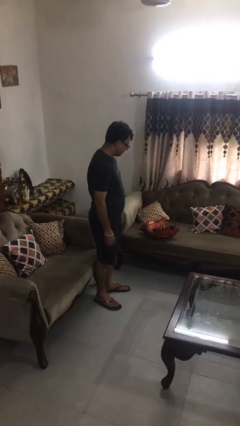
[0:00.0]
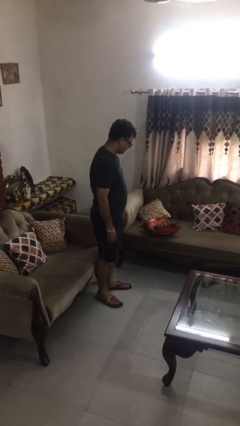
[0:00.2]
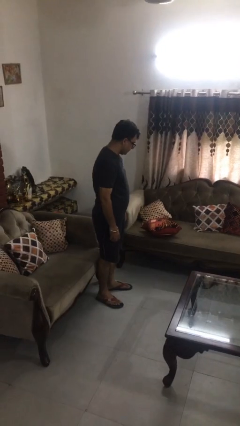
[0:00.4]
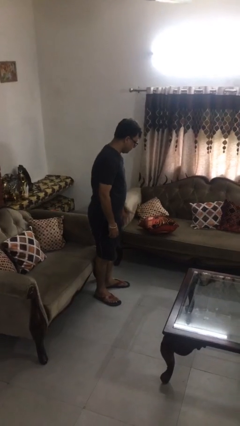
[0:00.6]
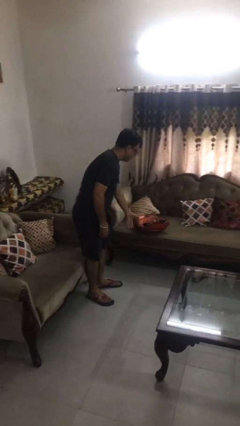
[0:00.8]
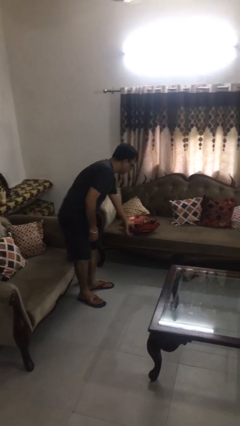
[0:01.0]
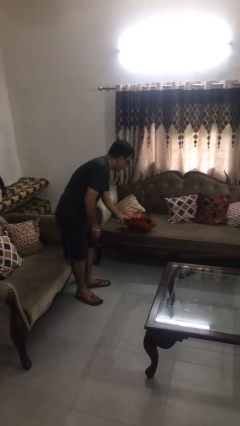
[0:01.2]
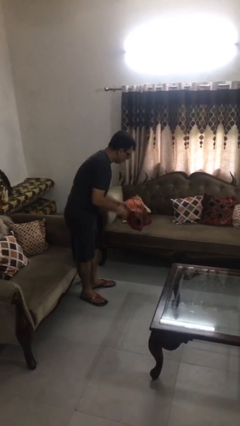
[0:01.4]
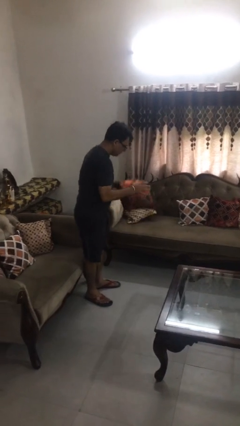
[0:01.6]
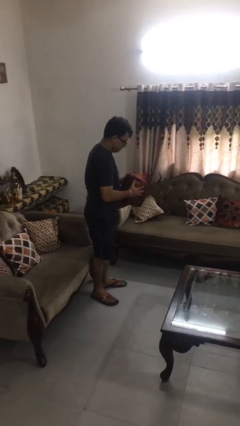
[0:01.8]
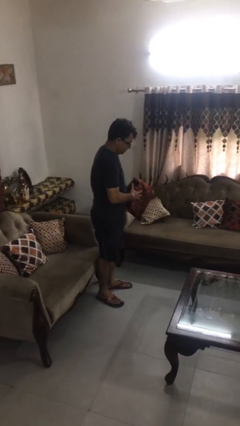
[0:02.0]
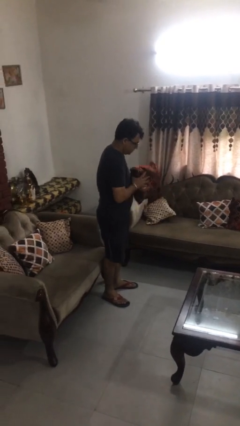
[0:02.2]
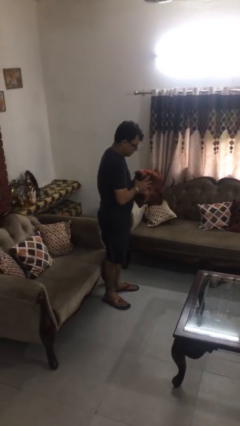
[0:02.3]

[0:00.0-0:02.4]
person picks up object from couch

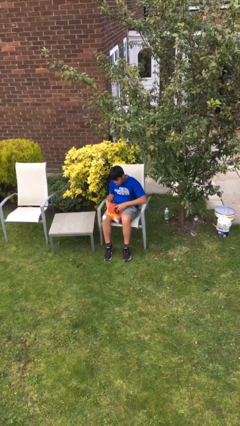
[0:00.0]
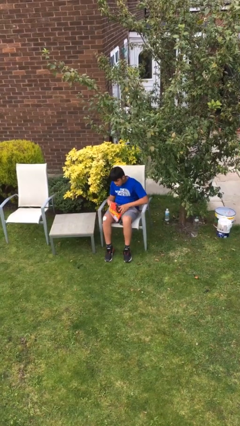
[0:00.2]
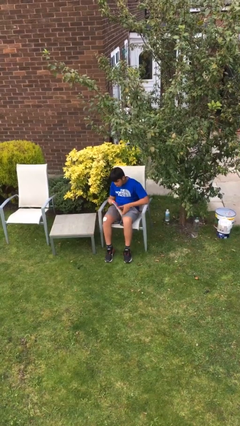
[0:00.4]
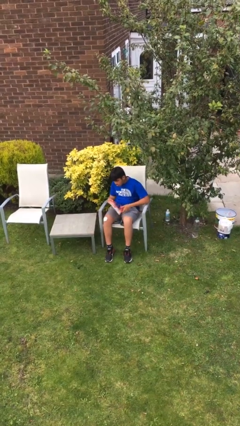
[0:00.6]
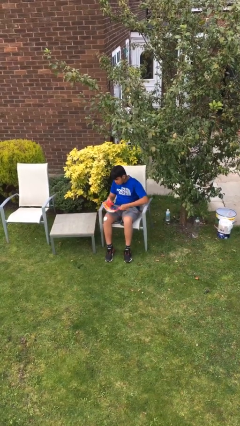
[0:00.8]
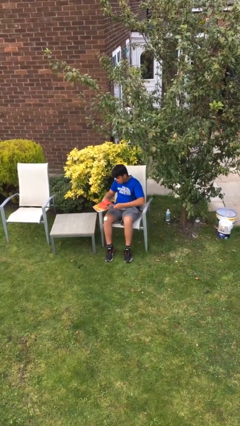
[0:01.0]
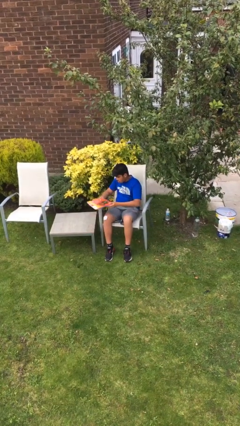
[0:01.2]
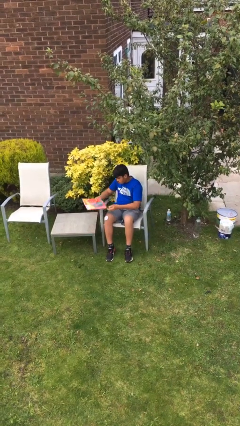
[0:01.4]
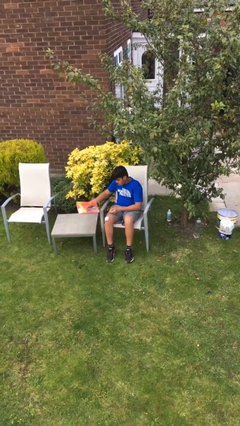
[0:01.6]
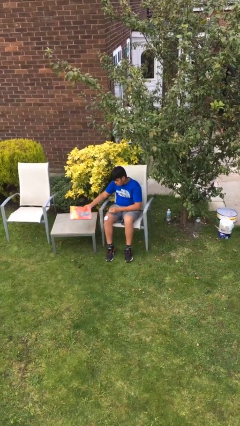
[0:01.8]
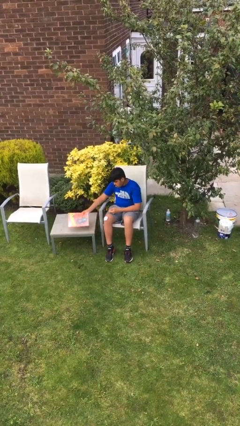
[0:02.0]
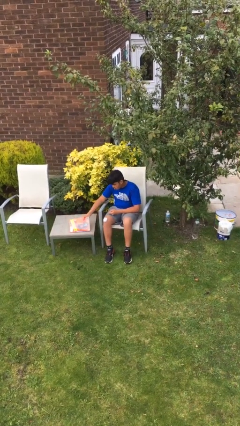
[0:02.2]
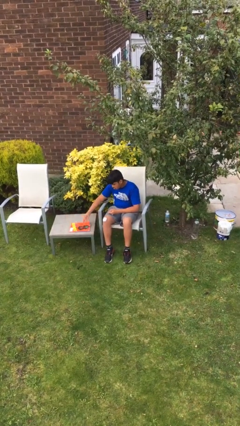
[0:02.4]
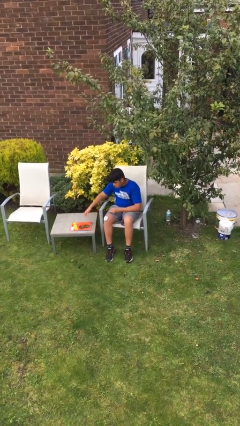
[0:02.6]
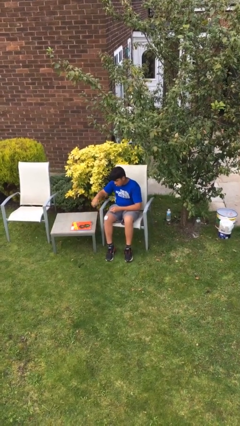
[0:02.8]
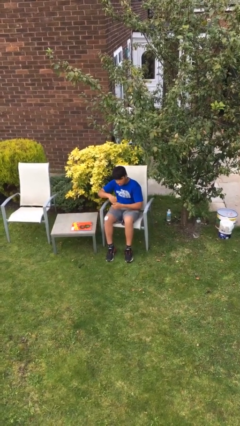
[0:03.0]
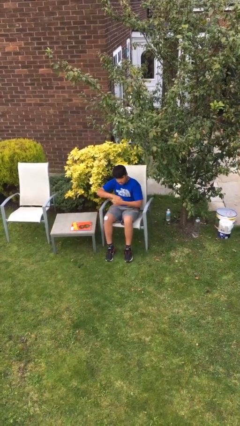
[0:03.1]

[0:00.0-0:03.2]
person puts down object on table

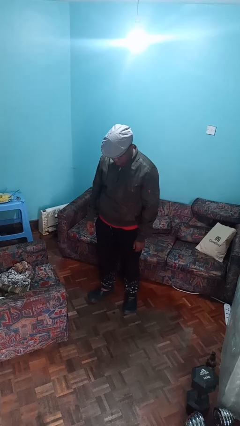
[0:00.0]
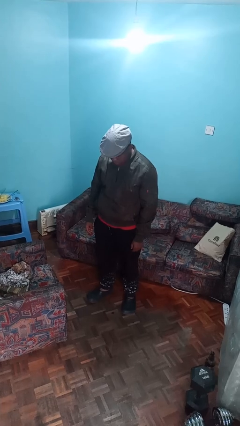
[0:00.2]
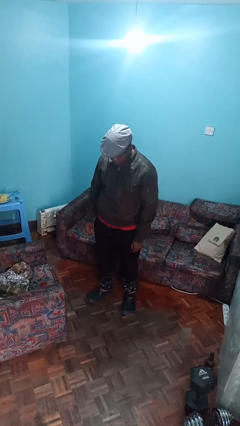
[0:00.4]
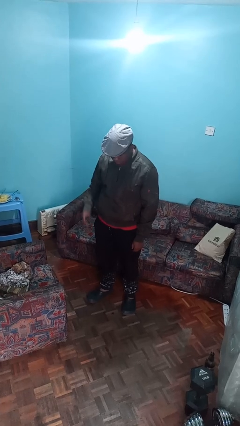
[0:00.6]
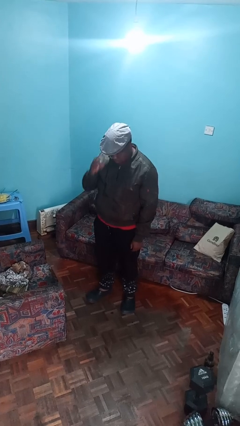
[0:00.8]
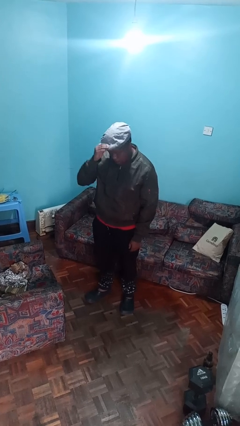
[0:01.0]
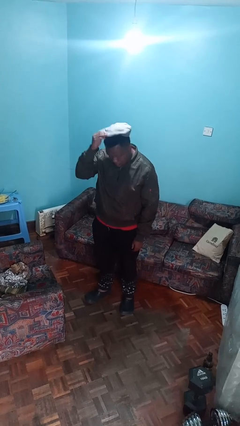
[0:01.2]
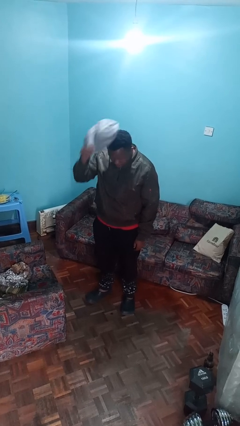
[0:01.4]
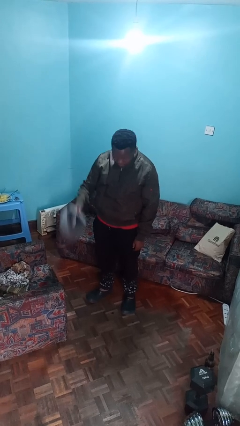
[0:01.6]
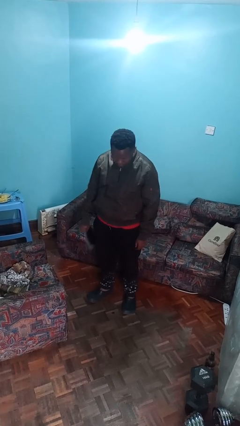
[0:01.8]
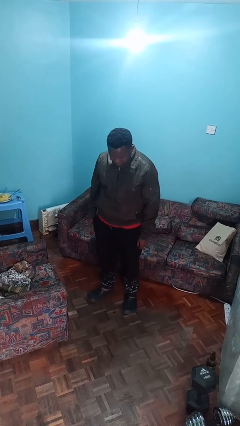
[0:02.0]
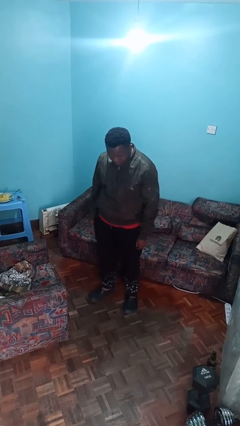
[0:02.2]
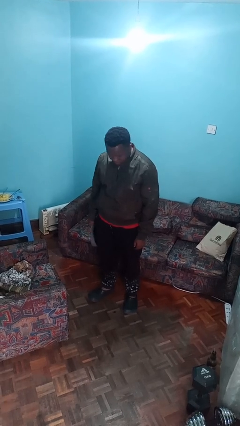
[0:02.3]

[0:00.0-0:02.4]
person takes off hat

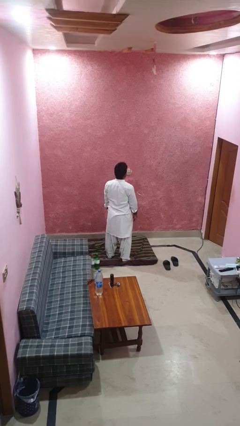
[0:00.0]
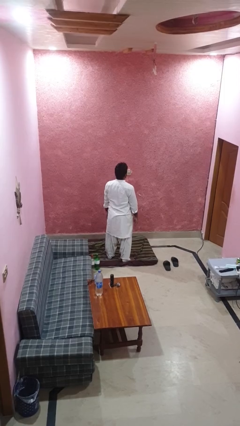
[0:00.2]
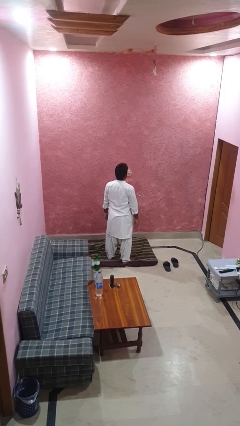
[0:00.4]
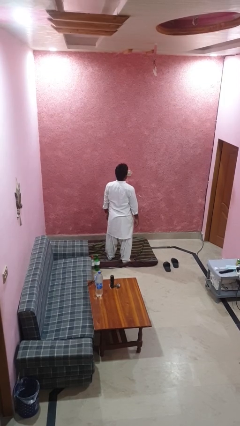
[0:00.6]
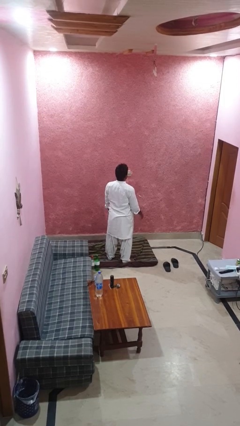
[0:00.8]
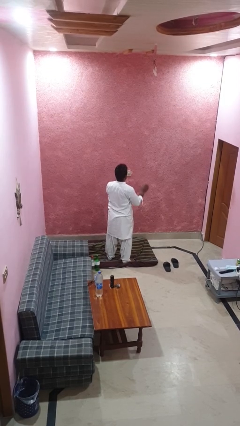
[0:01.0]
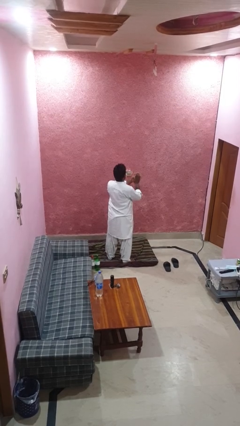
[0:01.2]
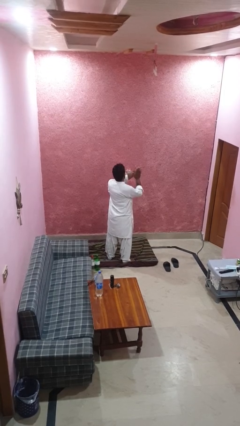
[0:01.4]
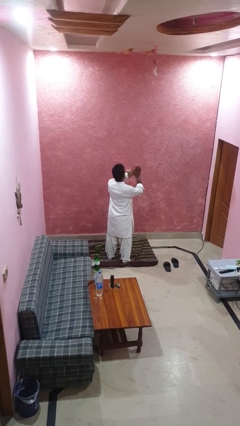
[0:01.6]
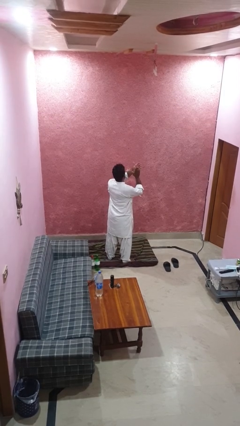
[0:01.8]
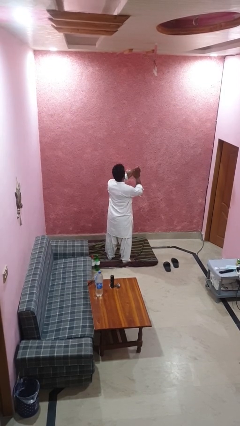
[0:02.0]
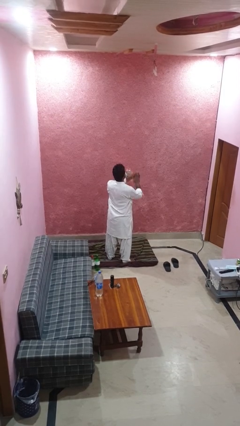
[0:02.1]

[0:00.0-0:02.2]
person claps hands

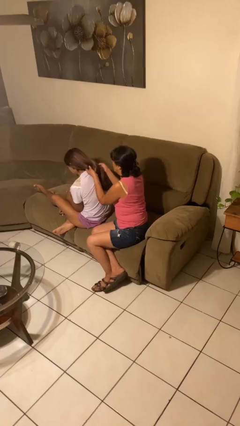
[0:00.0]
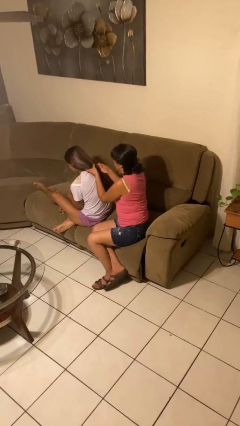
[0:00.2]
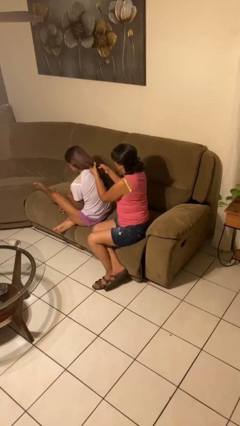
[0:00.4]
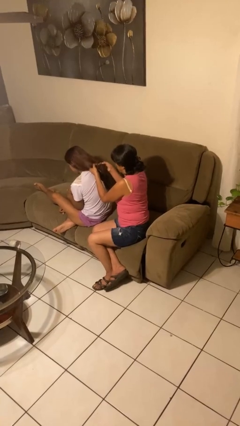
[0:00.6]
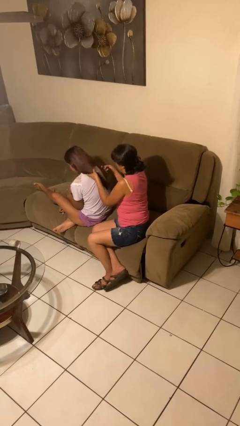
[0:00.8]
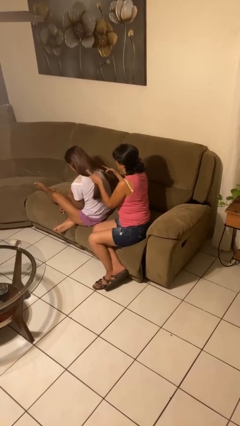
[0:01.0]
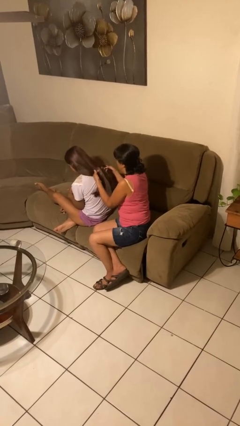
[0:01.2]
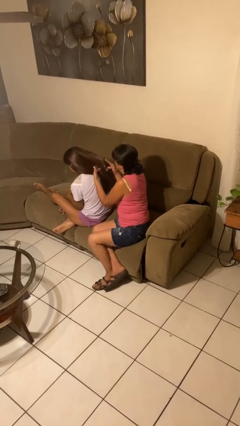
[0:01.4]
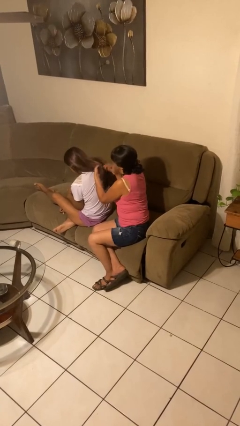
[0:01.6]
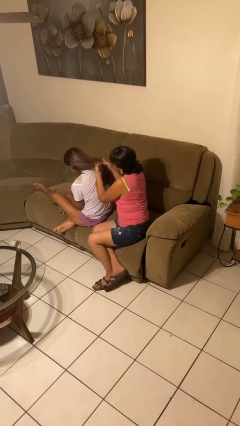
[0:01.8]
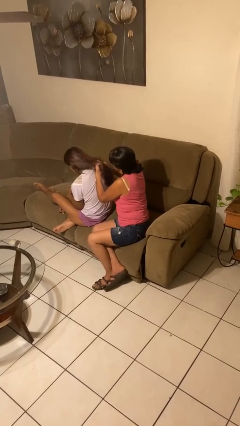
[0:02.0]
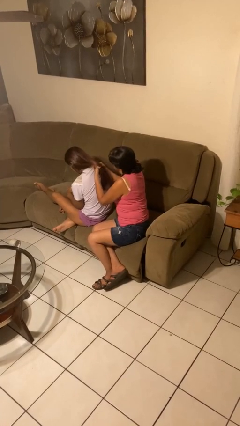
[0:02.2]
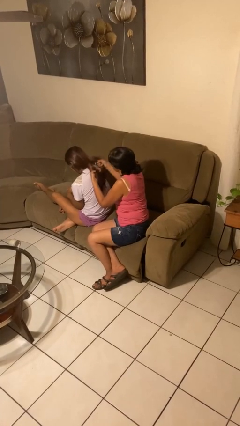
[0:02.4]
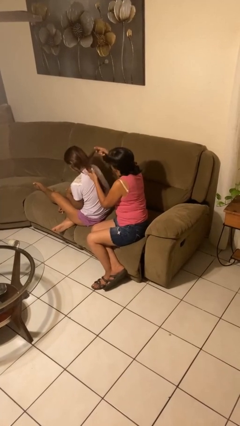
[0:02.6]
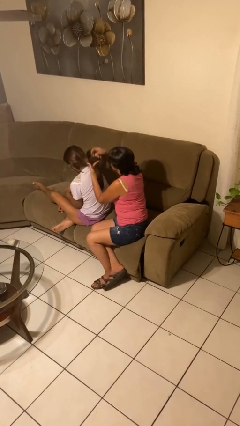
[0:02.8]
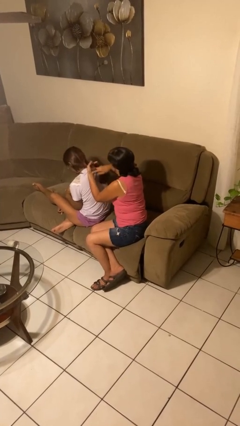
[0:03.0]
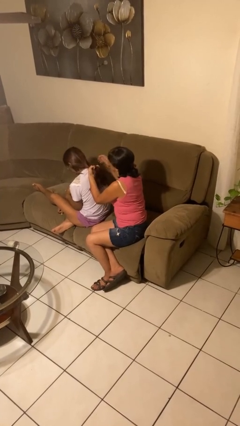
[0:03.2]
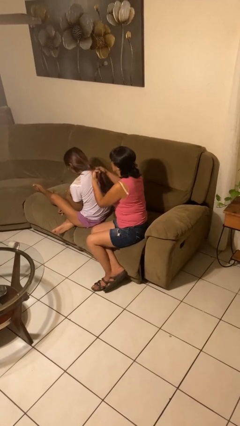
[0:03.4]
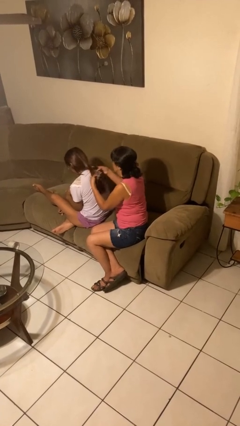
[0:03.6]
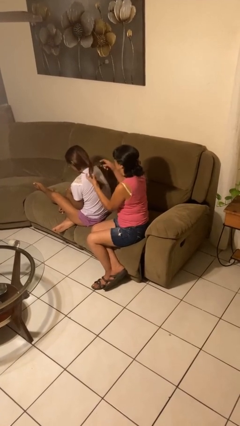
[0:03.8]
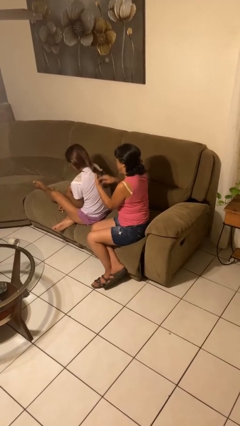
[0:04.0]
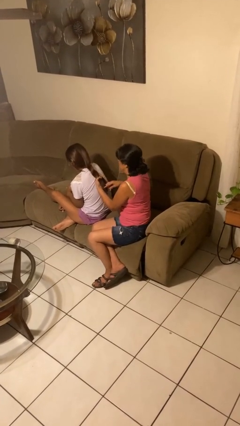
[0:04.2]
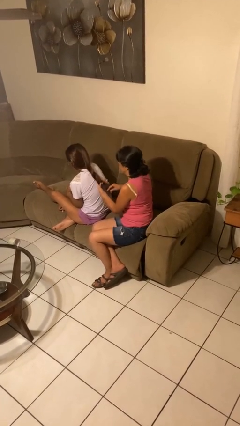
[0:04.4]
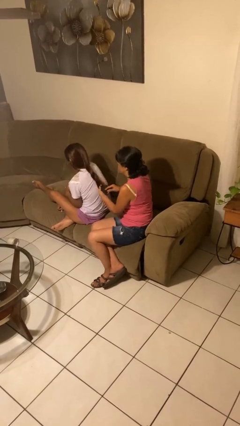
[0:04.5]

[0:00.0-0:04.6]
person braids hair of person

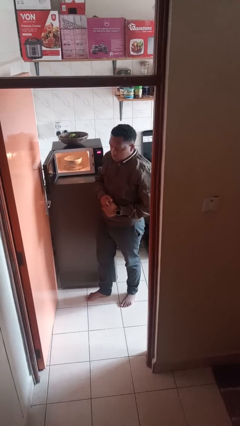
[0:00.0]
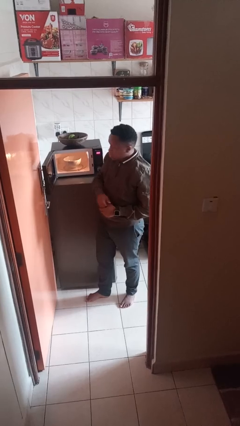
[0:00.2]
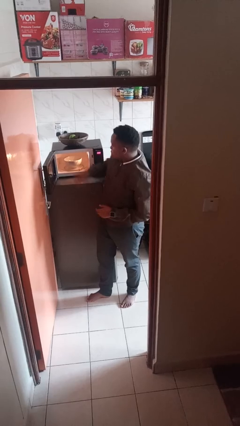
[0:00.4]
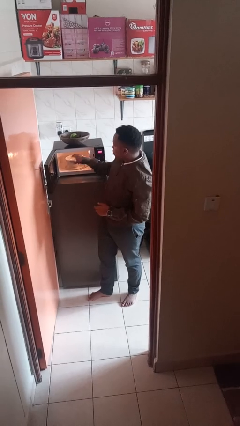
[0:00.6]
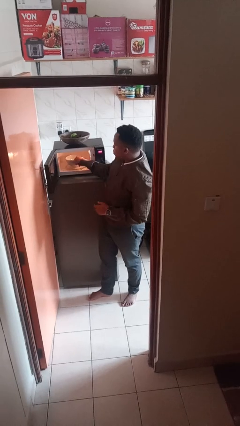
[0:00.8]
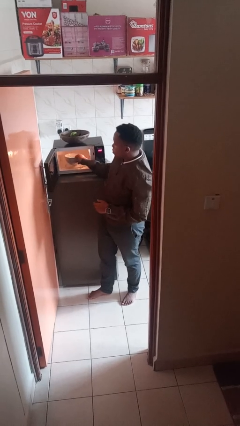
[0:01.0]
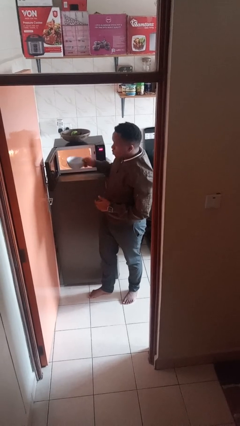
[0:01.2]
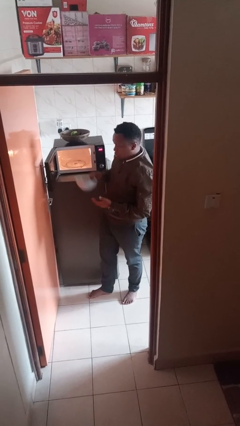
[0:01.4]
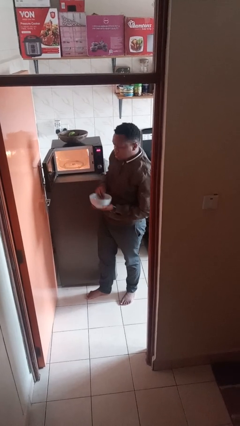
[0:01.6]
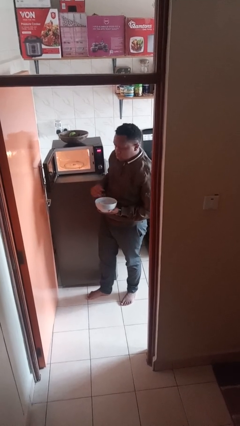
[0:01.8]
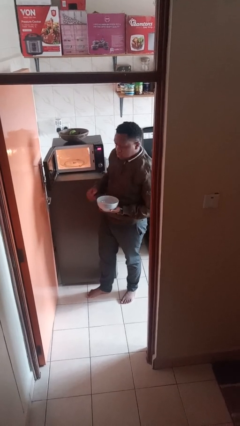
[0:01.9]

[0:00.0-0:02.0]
person takes object from microwave
